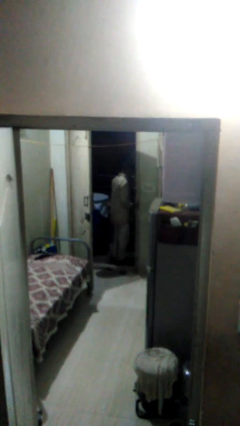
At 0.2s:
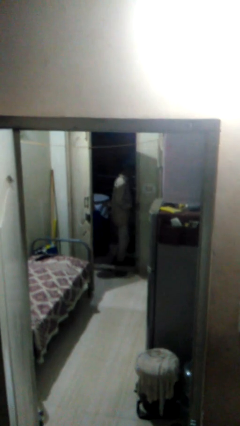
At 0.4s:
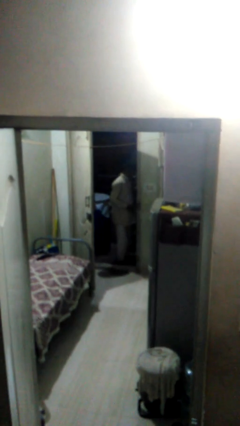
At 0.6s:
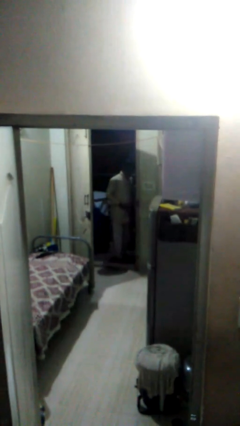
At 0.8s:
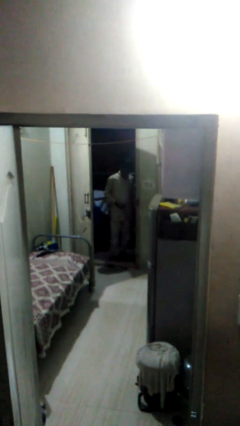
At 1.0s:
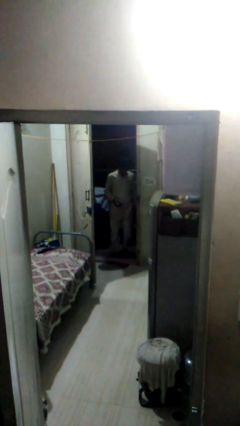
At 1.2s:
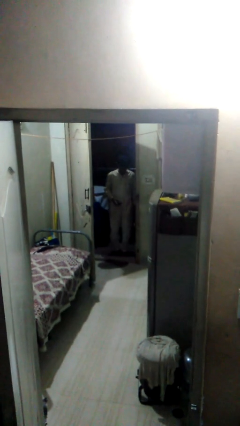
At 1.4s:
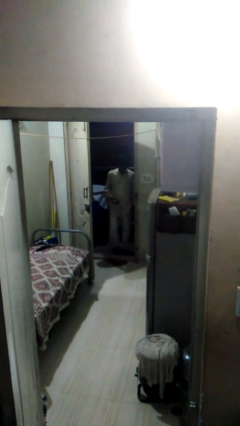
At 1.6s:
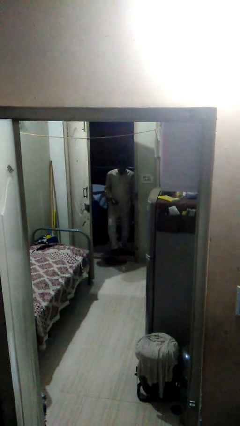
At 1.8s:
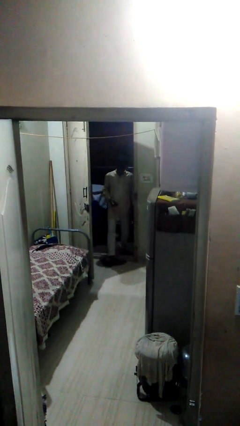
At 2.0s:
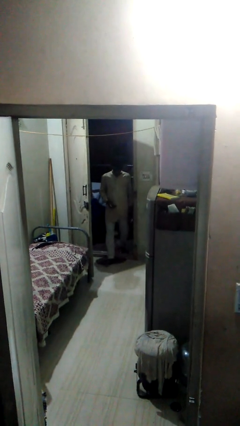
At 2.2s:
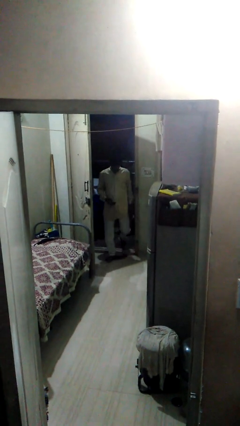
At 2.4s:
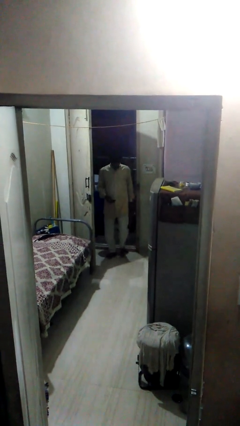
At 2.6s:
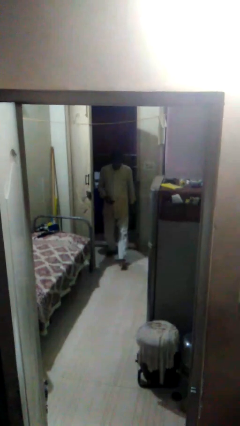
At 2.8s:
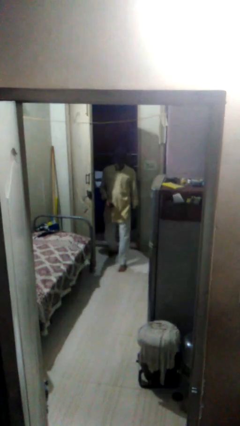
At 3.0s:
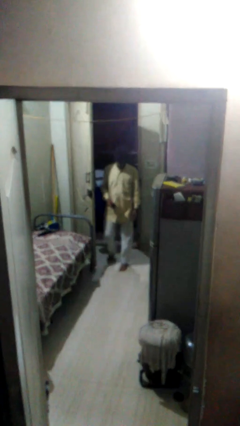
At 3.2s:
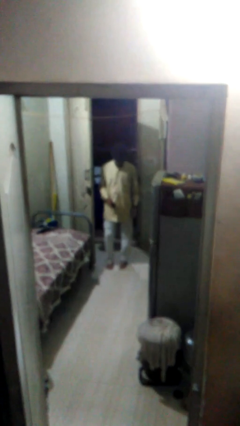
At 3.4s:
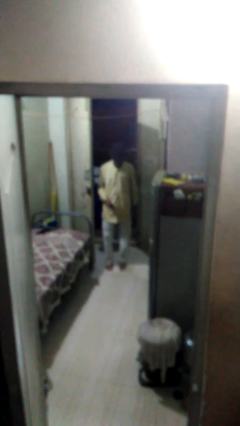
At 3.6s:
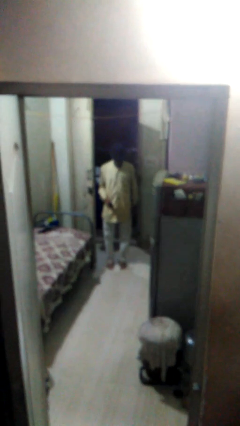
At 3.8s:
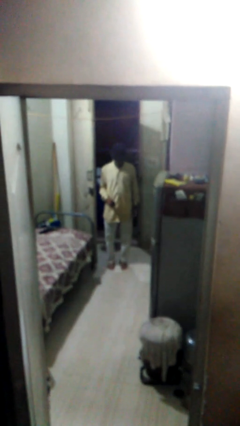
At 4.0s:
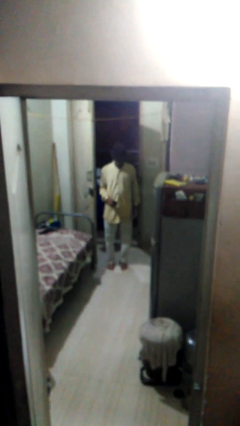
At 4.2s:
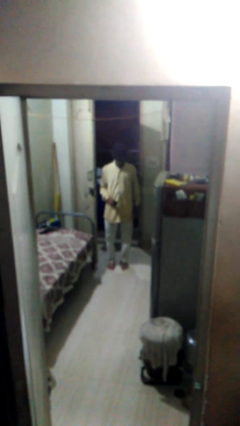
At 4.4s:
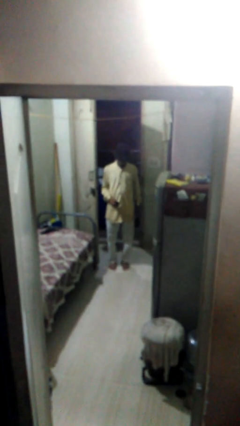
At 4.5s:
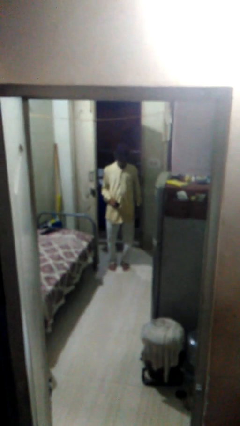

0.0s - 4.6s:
person enters scene through structure

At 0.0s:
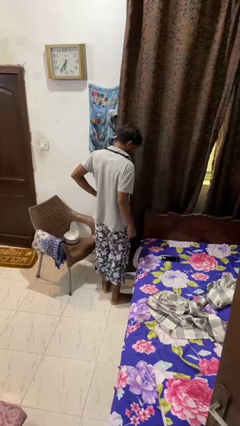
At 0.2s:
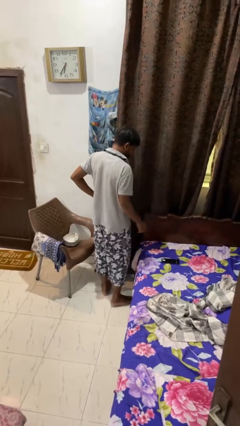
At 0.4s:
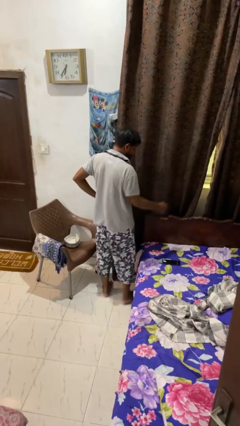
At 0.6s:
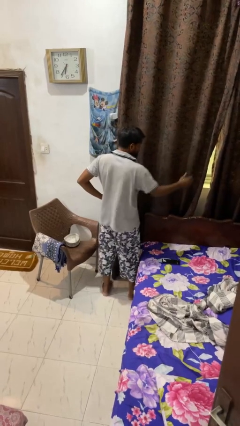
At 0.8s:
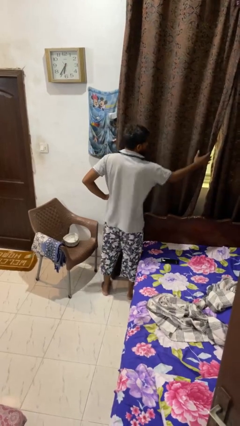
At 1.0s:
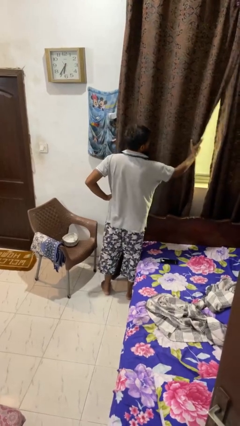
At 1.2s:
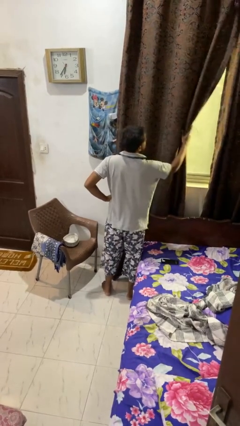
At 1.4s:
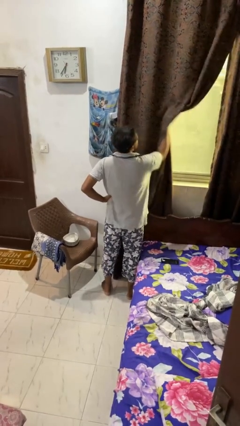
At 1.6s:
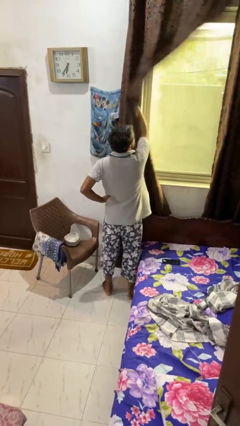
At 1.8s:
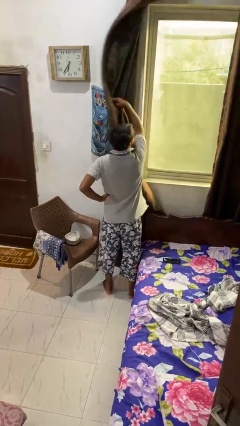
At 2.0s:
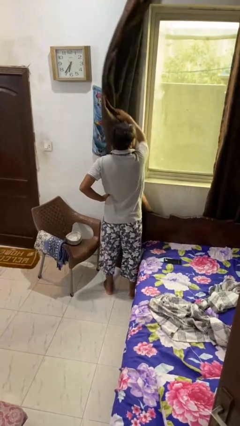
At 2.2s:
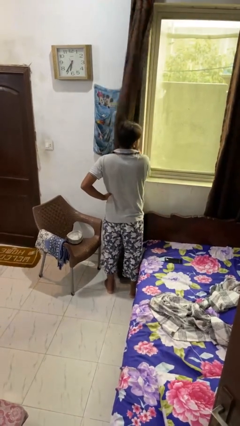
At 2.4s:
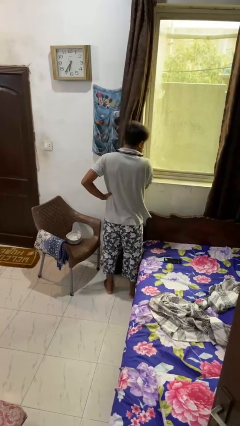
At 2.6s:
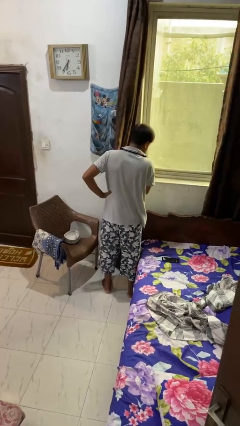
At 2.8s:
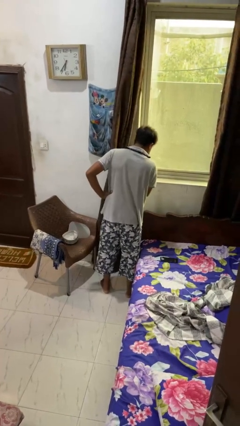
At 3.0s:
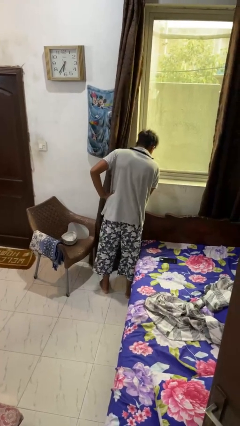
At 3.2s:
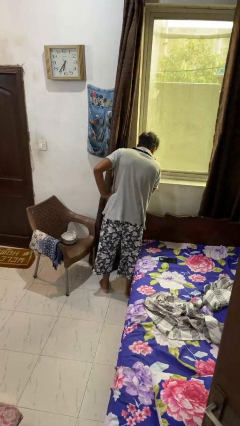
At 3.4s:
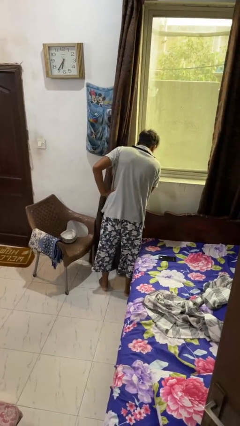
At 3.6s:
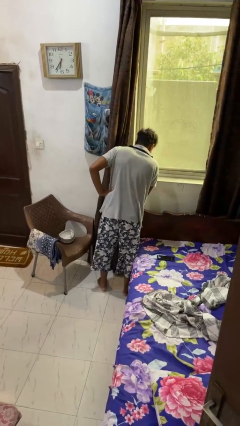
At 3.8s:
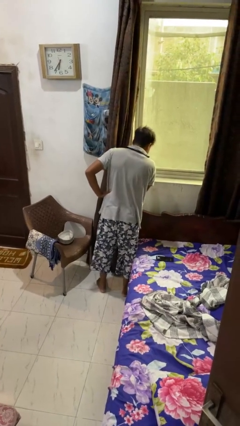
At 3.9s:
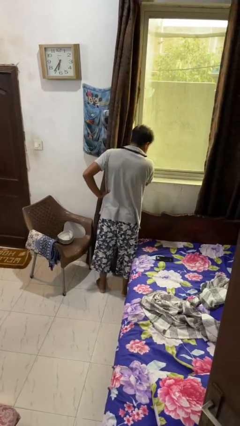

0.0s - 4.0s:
person opens curtains

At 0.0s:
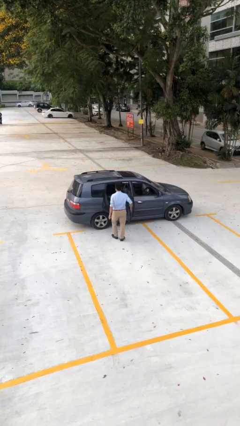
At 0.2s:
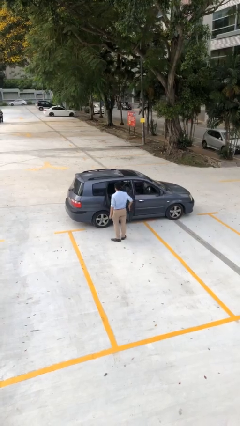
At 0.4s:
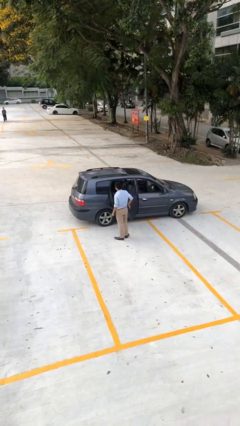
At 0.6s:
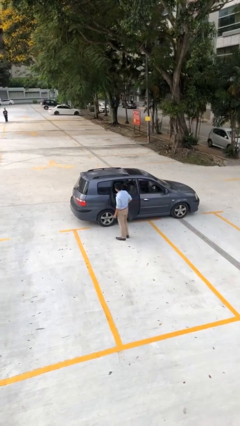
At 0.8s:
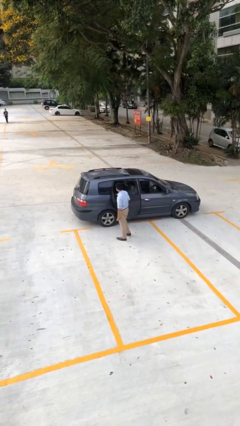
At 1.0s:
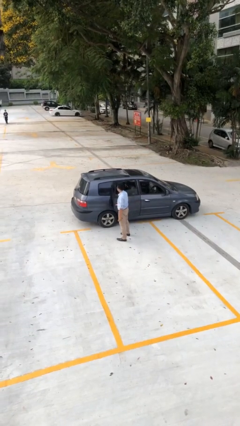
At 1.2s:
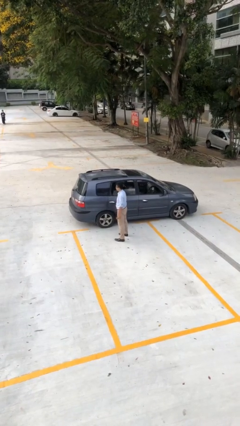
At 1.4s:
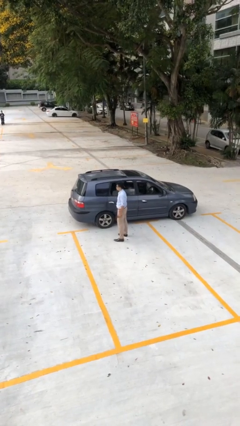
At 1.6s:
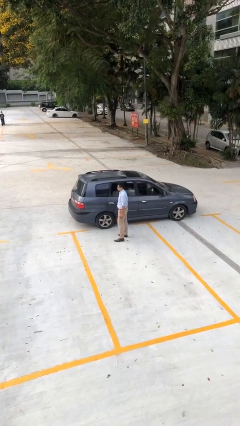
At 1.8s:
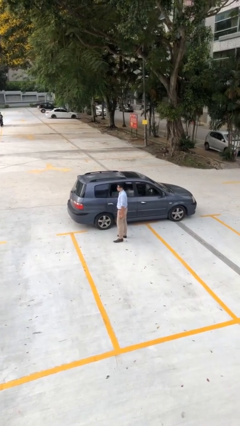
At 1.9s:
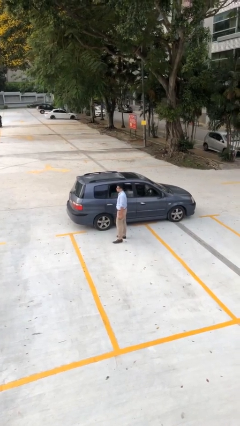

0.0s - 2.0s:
person closes car door

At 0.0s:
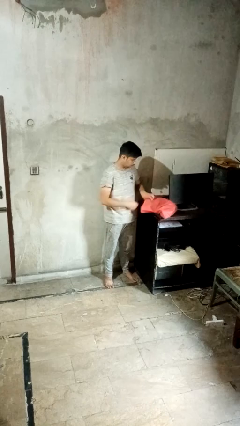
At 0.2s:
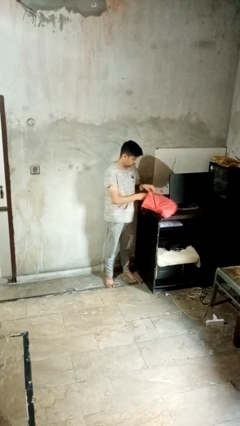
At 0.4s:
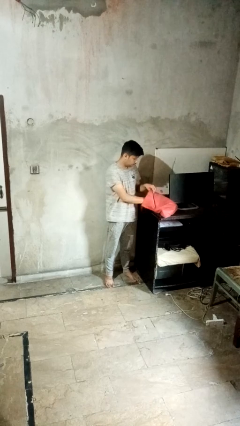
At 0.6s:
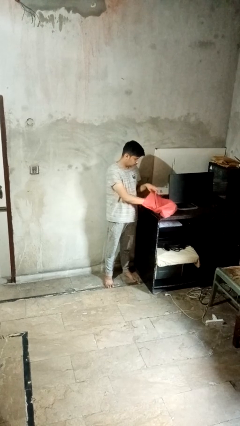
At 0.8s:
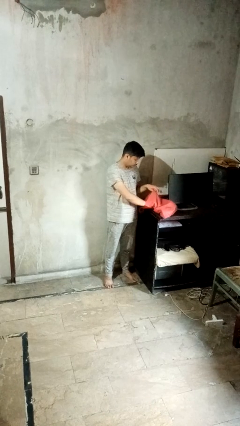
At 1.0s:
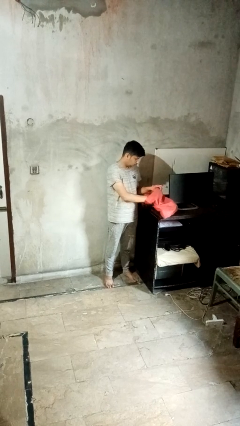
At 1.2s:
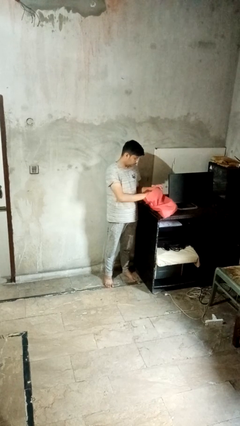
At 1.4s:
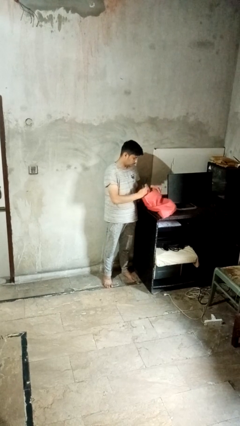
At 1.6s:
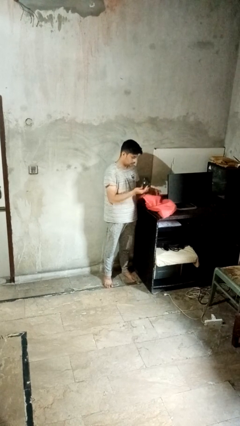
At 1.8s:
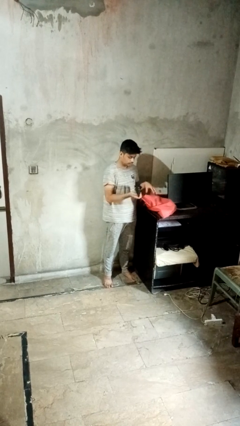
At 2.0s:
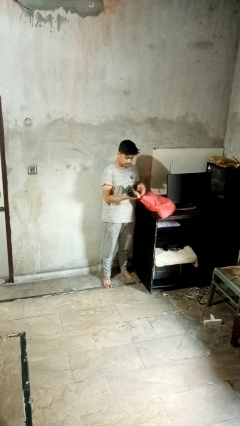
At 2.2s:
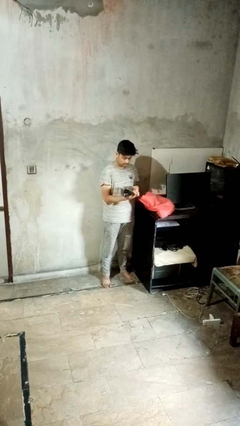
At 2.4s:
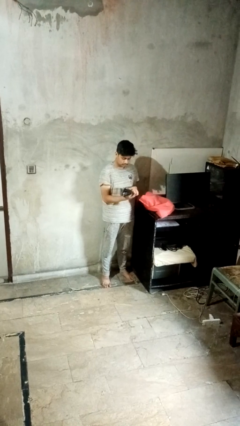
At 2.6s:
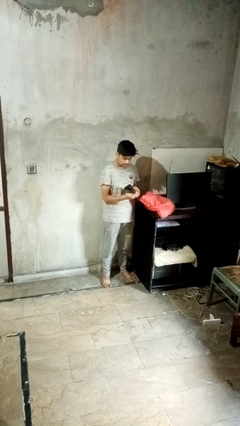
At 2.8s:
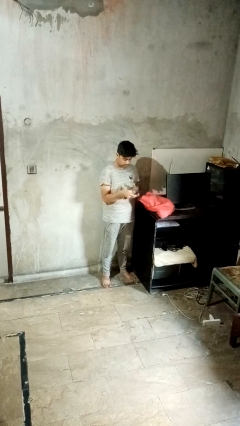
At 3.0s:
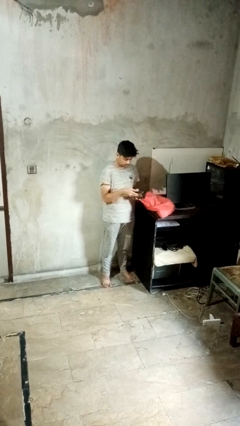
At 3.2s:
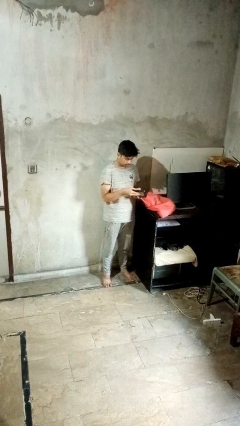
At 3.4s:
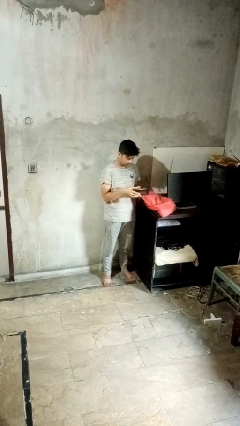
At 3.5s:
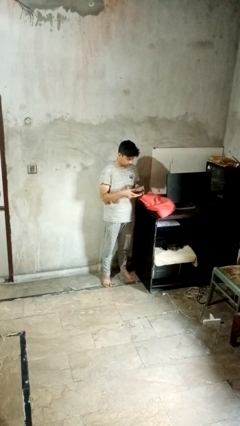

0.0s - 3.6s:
person takes object from bag

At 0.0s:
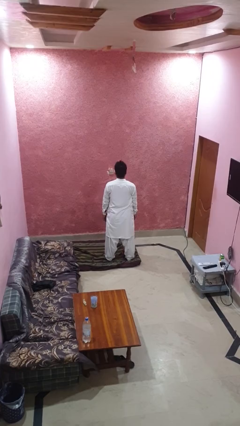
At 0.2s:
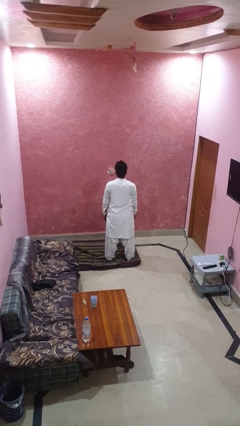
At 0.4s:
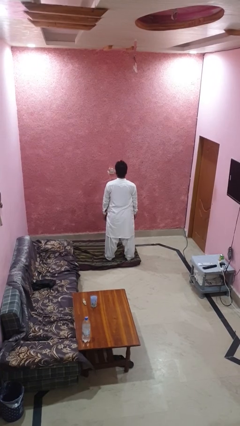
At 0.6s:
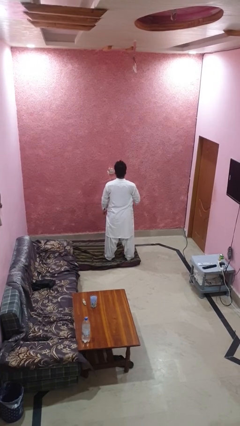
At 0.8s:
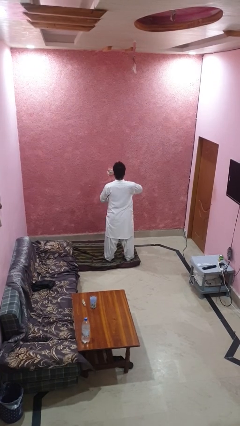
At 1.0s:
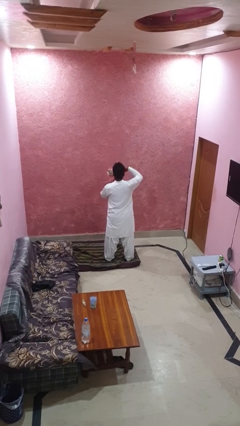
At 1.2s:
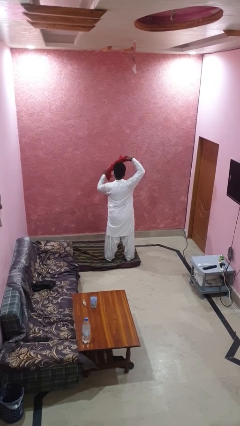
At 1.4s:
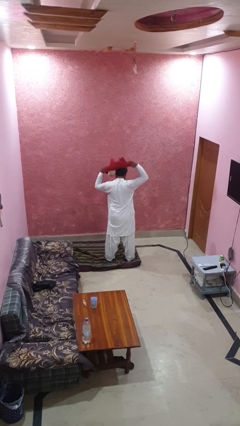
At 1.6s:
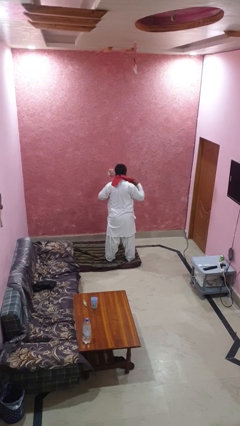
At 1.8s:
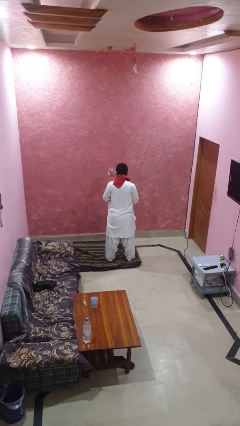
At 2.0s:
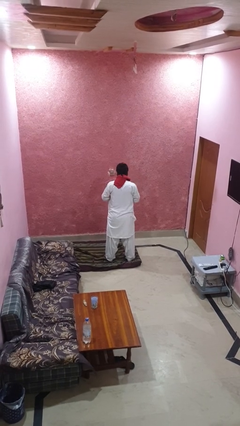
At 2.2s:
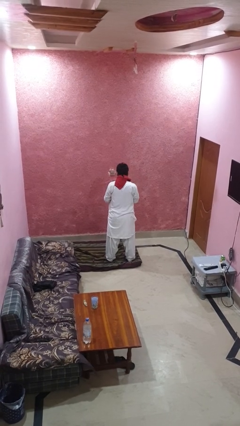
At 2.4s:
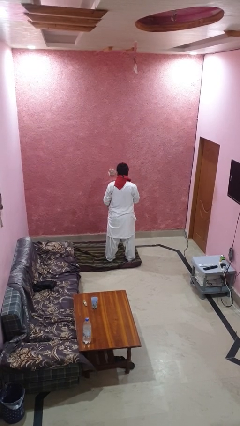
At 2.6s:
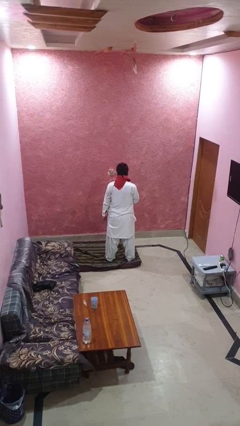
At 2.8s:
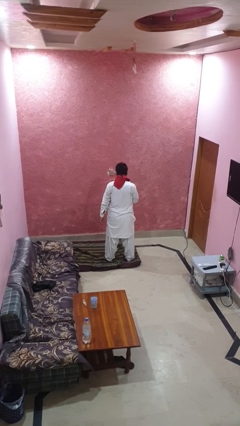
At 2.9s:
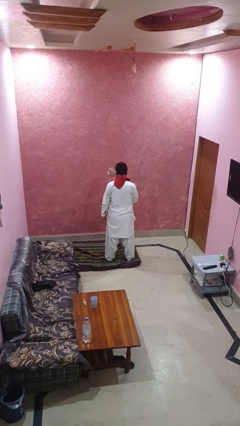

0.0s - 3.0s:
person puts on scarf

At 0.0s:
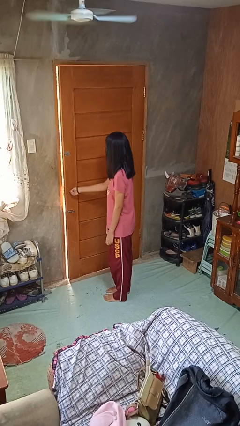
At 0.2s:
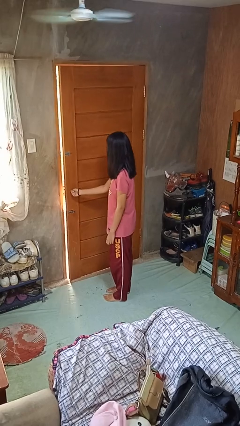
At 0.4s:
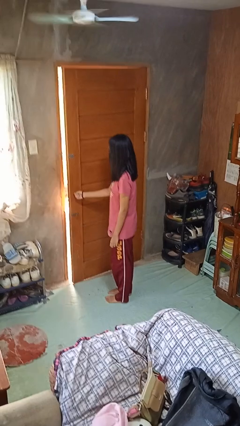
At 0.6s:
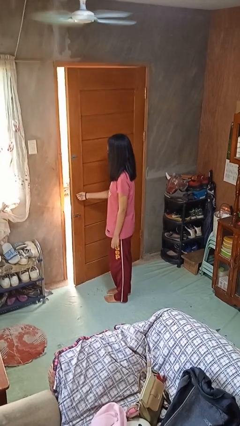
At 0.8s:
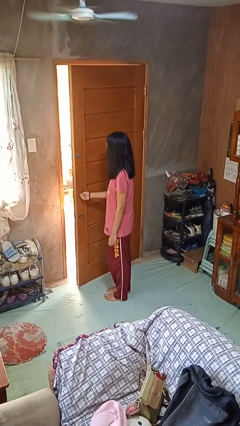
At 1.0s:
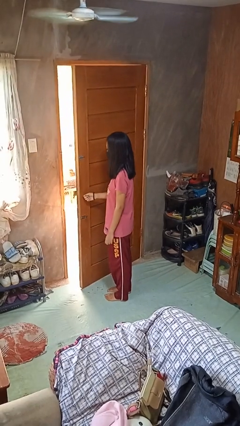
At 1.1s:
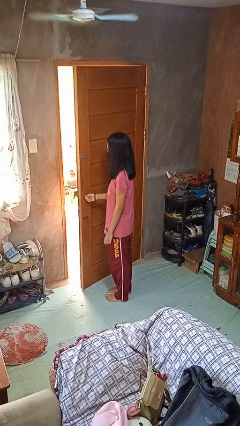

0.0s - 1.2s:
person opens facility door
